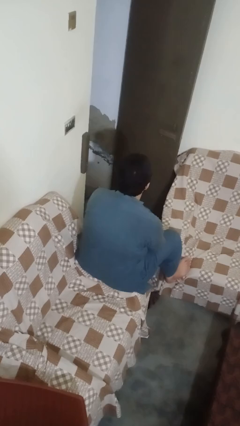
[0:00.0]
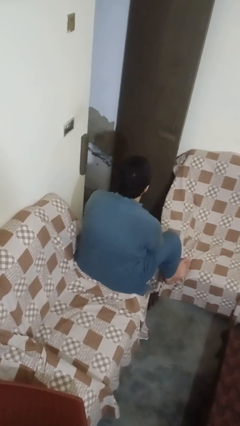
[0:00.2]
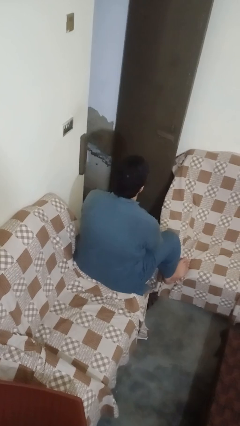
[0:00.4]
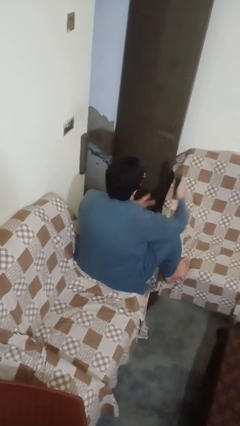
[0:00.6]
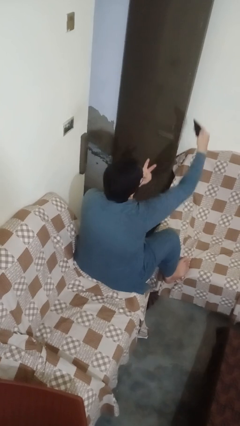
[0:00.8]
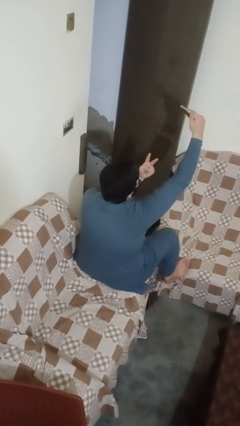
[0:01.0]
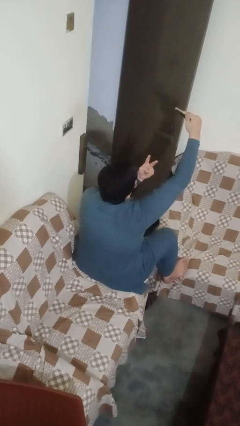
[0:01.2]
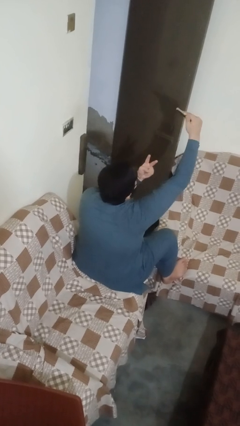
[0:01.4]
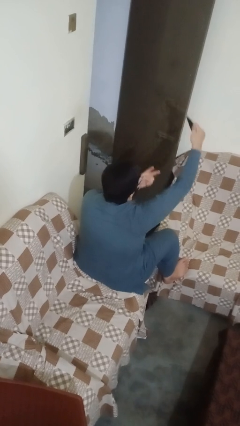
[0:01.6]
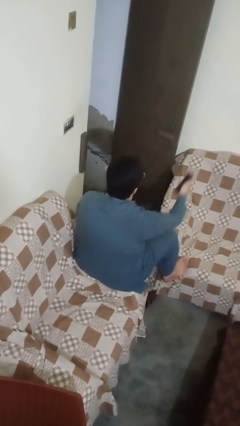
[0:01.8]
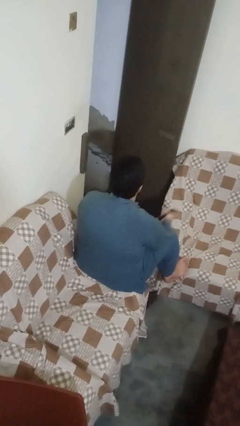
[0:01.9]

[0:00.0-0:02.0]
person takes selfie

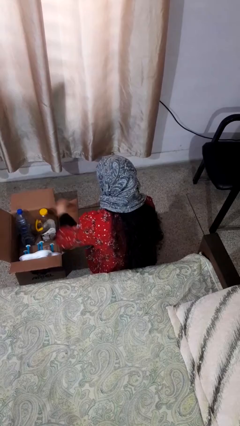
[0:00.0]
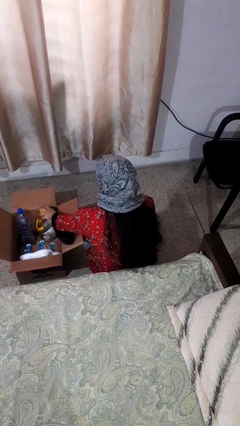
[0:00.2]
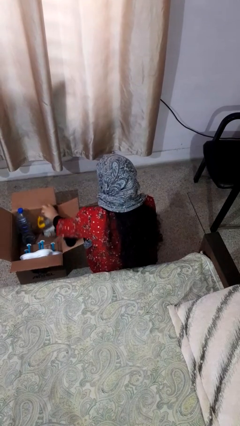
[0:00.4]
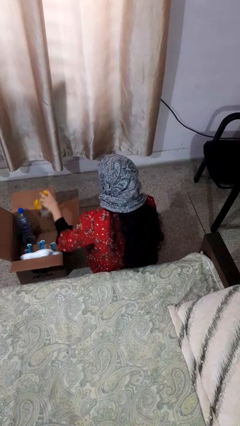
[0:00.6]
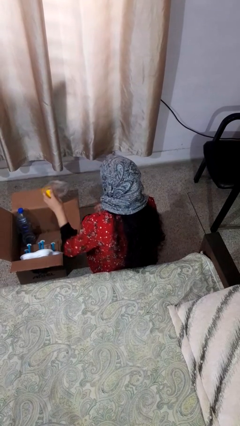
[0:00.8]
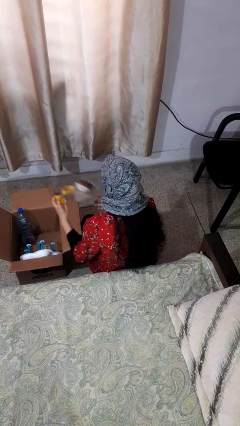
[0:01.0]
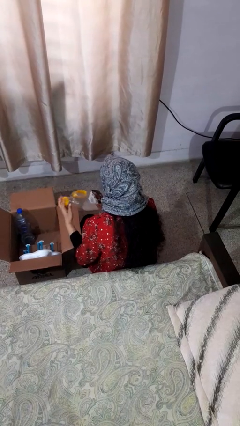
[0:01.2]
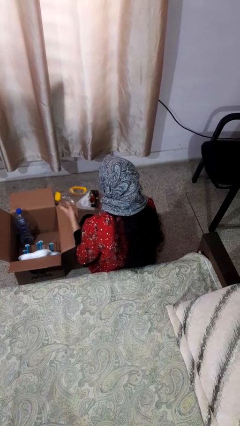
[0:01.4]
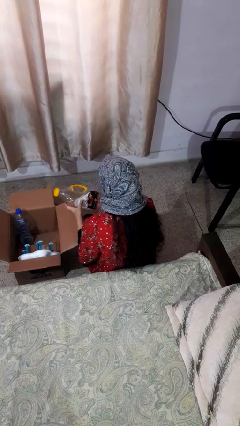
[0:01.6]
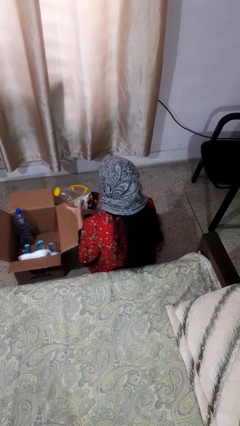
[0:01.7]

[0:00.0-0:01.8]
person takes object from box

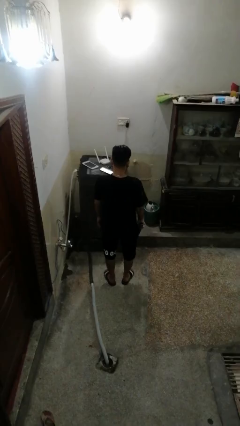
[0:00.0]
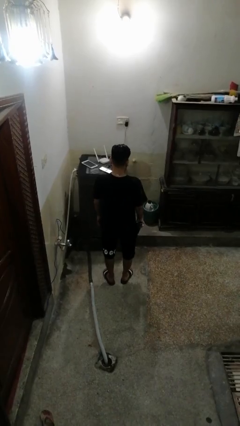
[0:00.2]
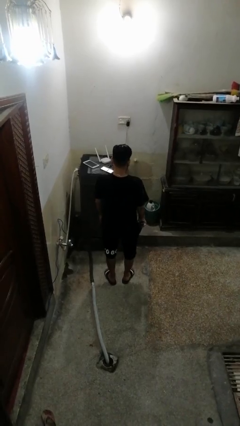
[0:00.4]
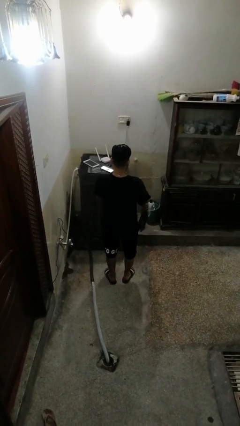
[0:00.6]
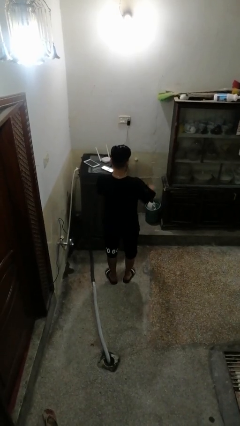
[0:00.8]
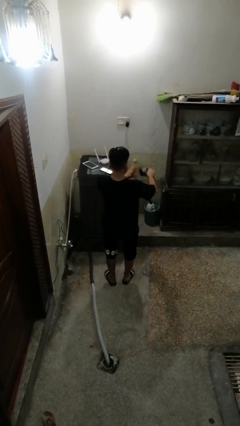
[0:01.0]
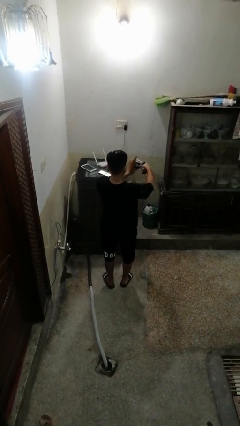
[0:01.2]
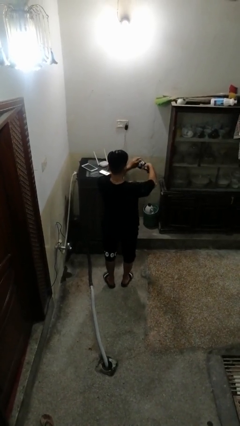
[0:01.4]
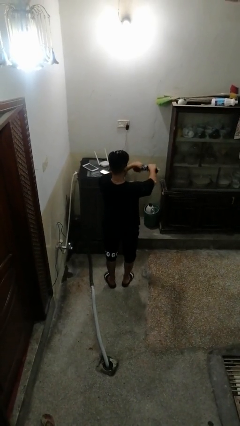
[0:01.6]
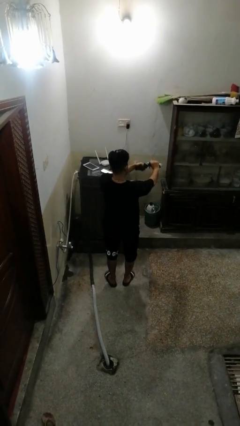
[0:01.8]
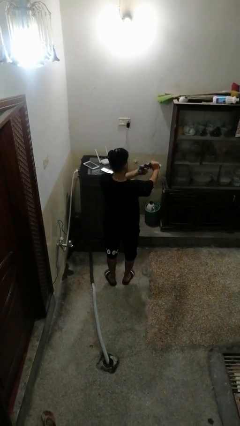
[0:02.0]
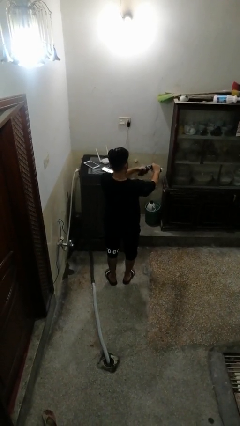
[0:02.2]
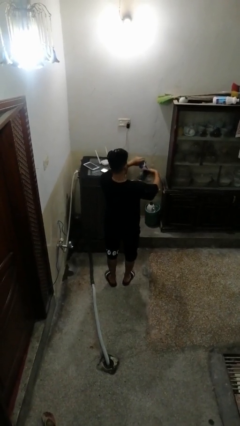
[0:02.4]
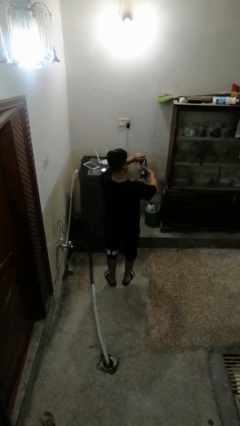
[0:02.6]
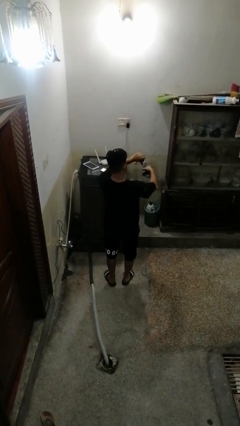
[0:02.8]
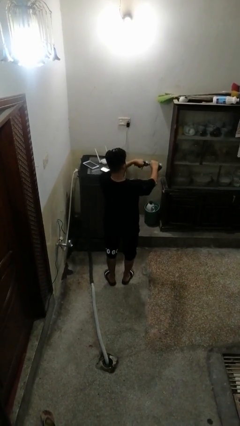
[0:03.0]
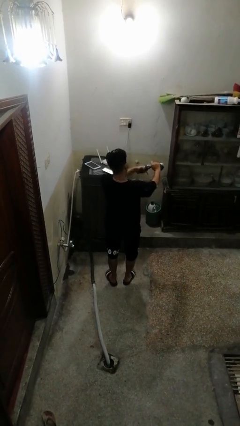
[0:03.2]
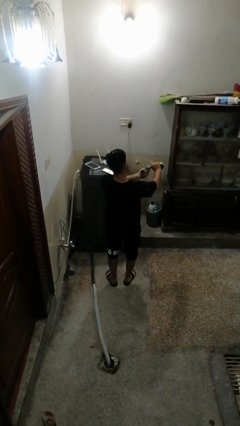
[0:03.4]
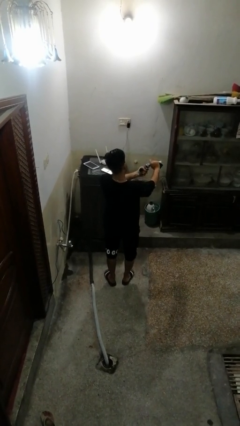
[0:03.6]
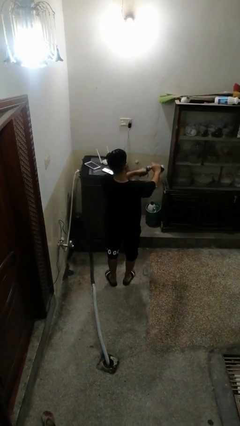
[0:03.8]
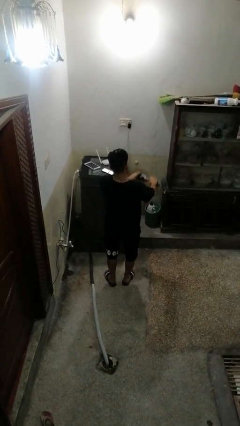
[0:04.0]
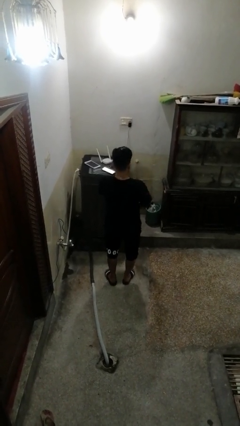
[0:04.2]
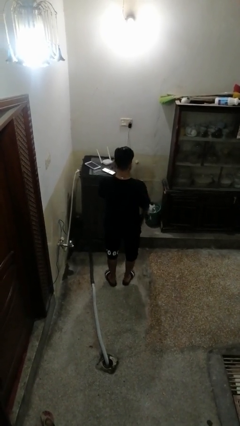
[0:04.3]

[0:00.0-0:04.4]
person squeezes object

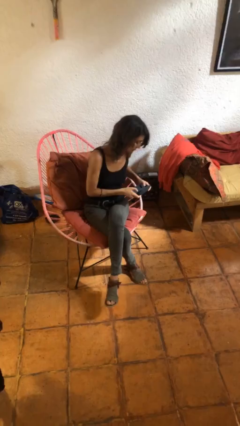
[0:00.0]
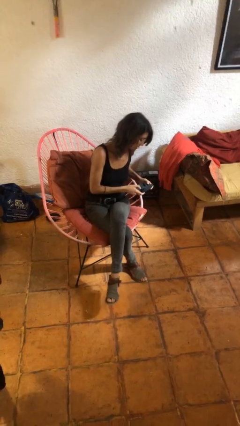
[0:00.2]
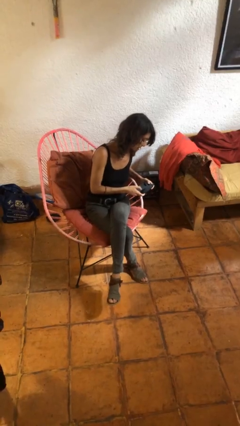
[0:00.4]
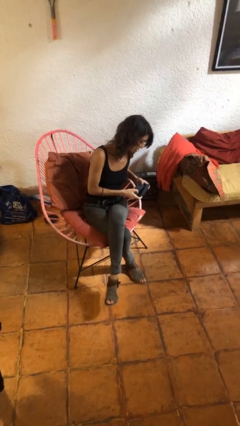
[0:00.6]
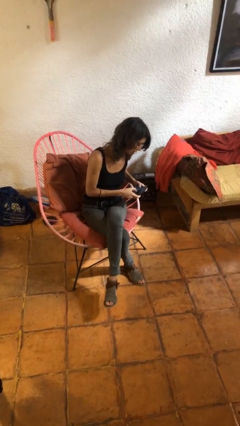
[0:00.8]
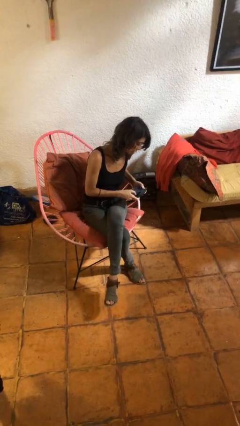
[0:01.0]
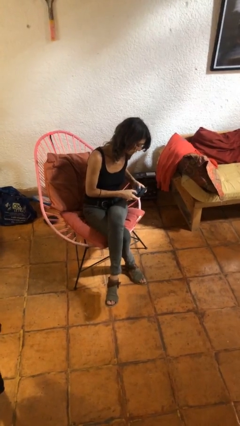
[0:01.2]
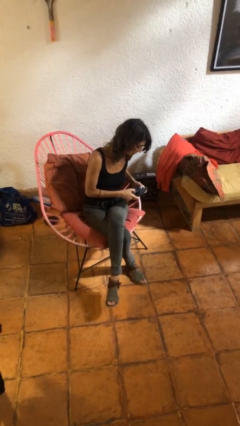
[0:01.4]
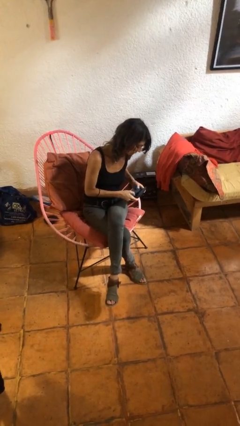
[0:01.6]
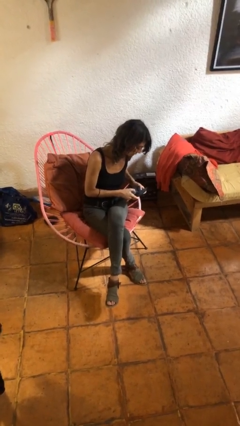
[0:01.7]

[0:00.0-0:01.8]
person interacts with handheld game

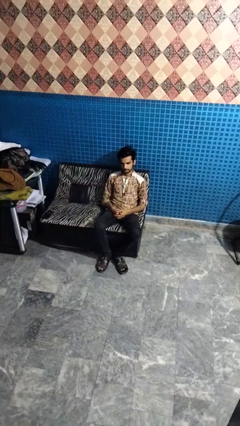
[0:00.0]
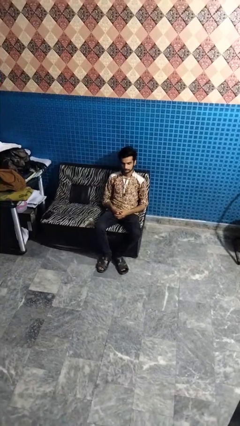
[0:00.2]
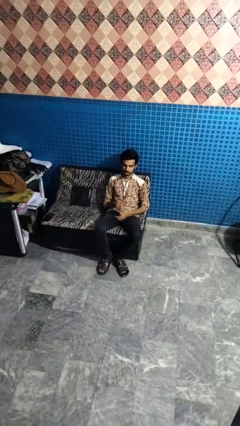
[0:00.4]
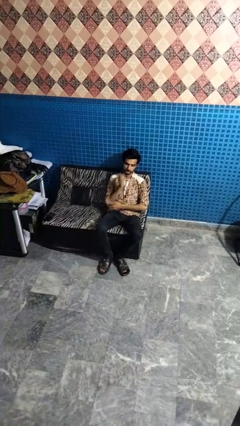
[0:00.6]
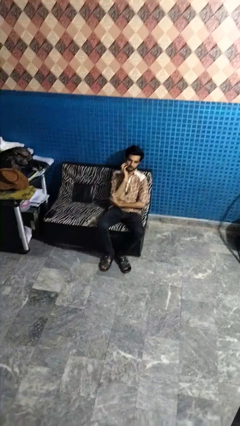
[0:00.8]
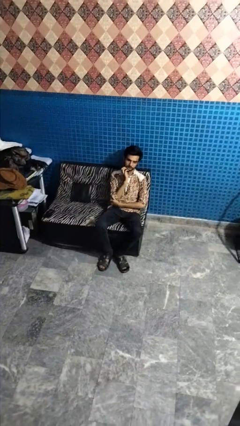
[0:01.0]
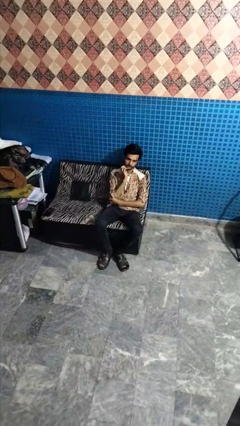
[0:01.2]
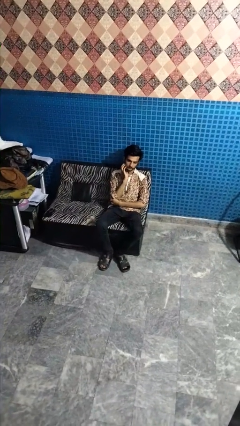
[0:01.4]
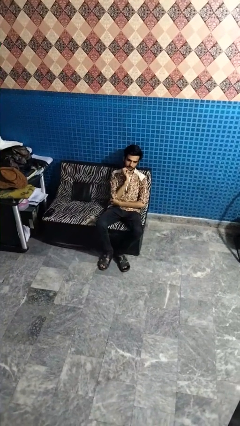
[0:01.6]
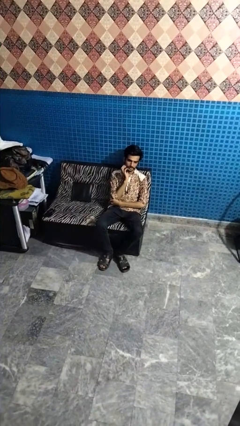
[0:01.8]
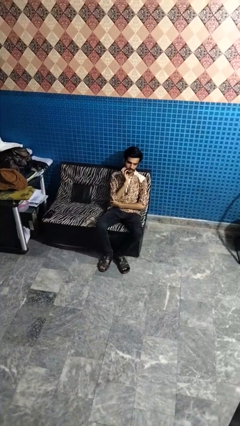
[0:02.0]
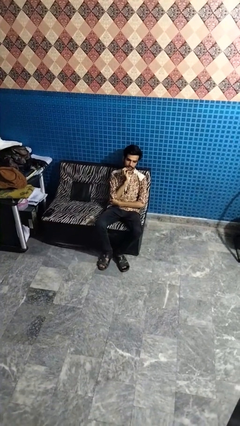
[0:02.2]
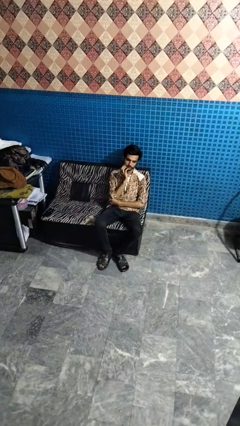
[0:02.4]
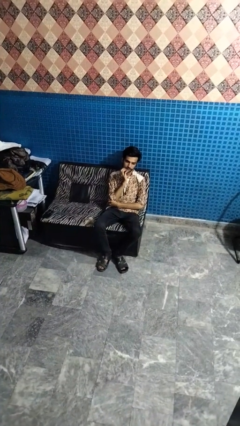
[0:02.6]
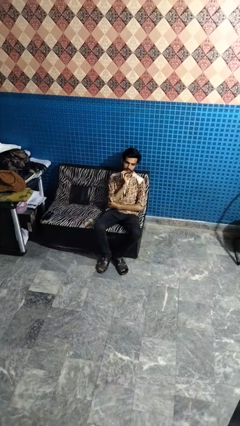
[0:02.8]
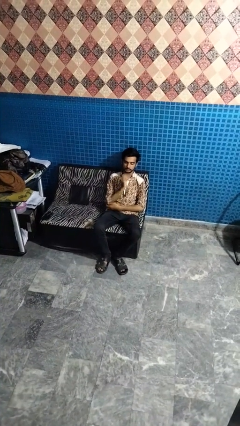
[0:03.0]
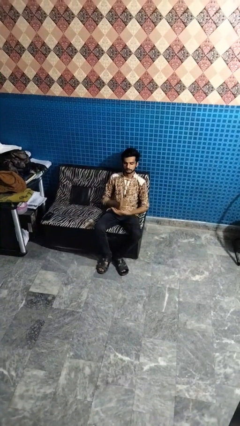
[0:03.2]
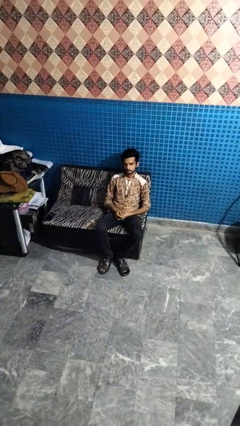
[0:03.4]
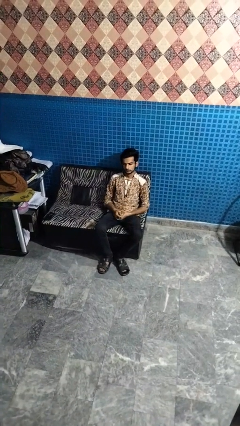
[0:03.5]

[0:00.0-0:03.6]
person strokes chin

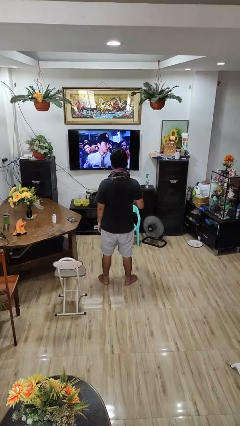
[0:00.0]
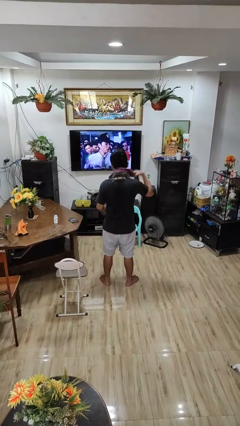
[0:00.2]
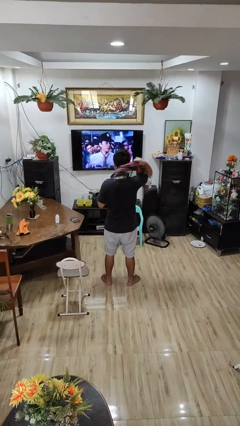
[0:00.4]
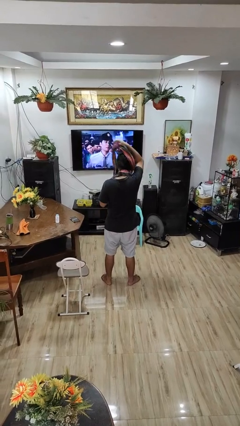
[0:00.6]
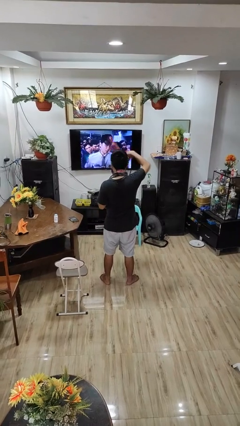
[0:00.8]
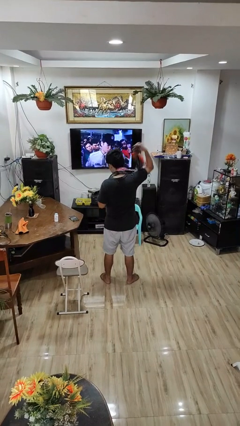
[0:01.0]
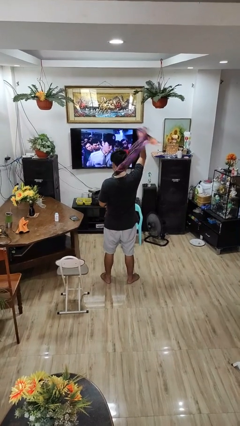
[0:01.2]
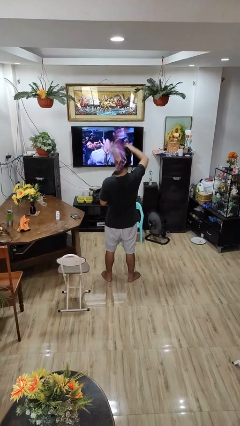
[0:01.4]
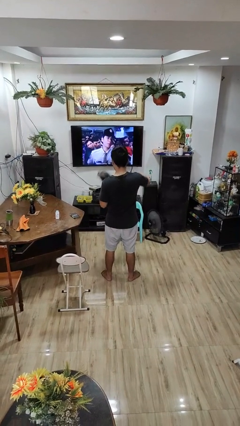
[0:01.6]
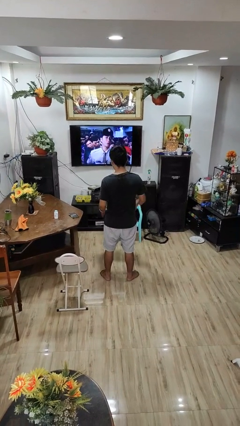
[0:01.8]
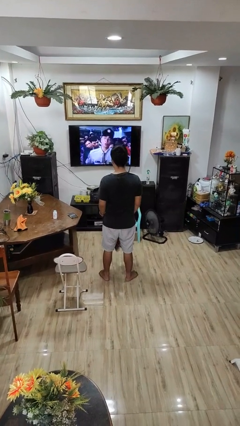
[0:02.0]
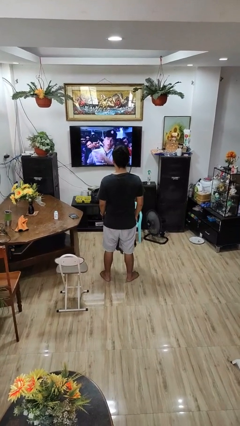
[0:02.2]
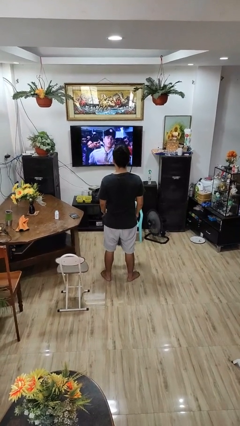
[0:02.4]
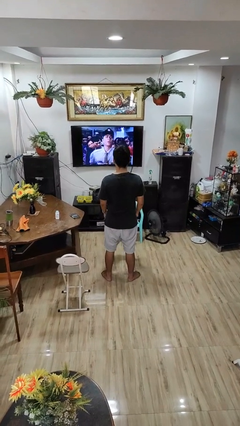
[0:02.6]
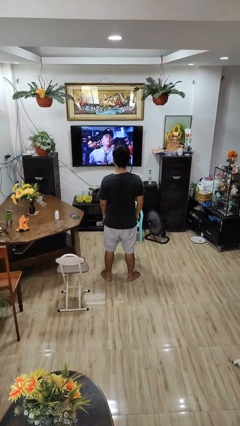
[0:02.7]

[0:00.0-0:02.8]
person takes off scarf

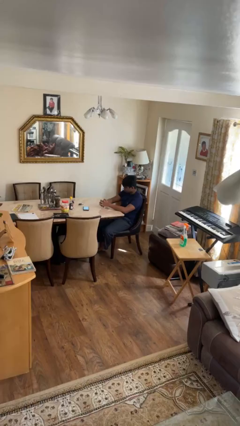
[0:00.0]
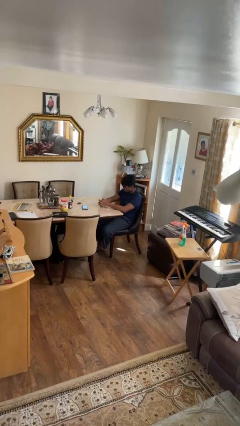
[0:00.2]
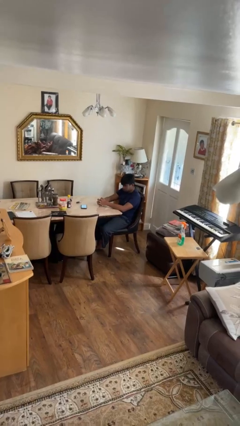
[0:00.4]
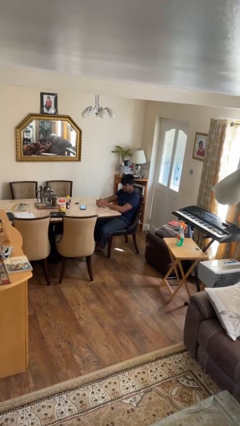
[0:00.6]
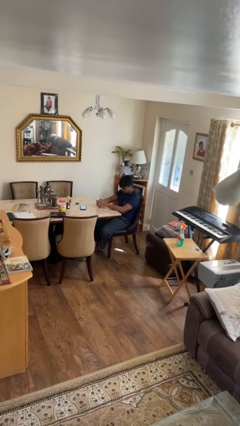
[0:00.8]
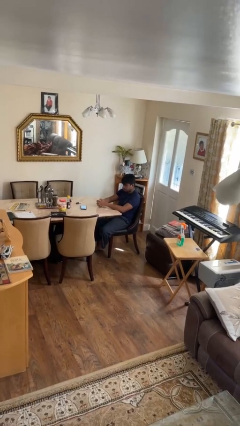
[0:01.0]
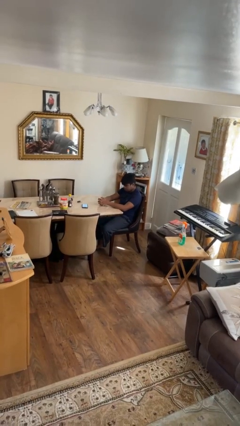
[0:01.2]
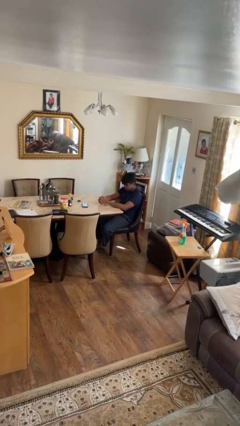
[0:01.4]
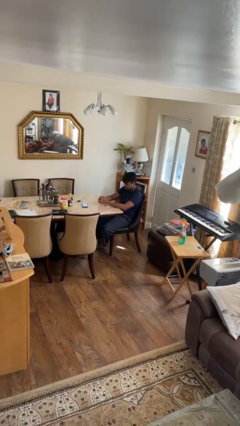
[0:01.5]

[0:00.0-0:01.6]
person nods head
